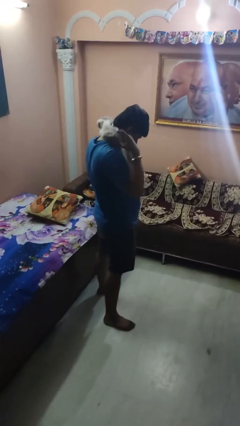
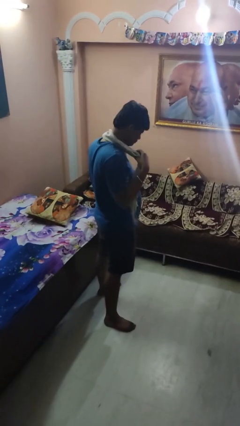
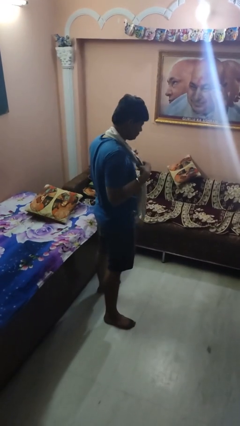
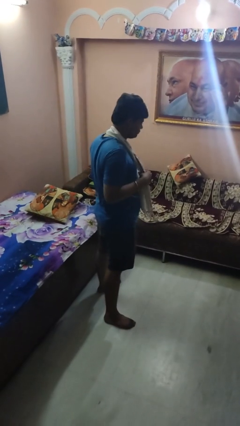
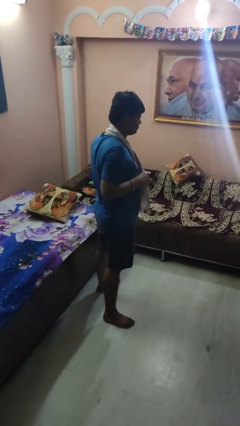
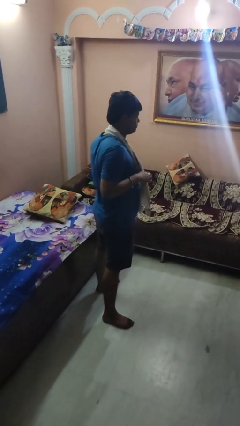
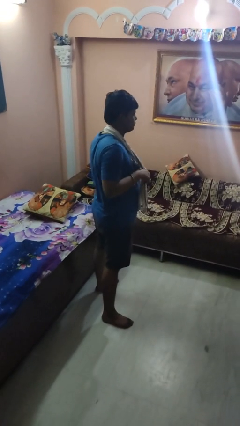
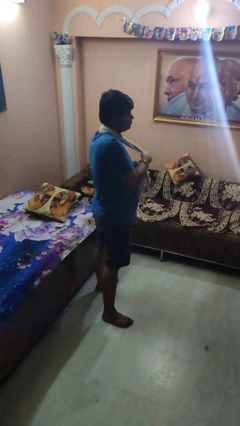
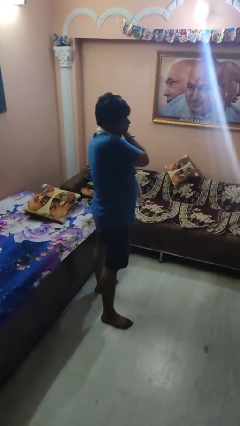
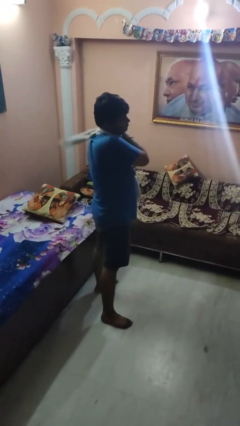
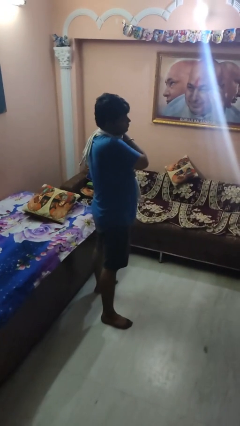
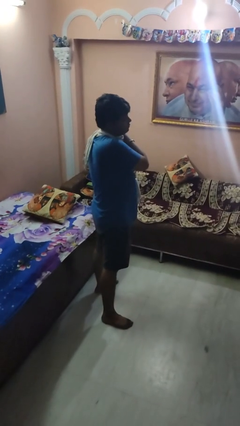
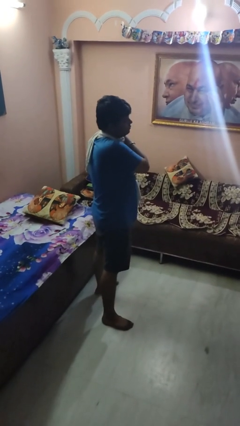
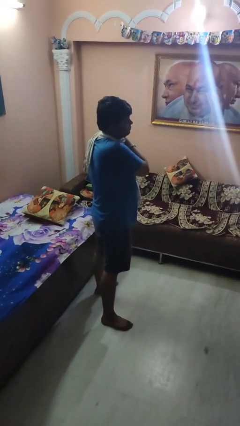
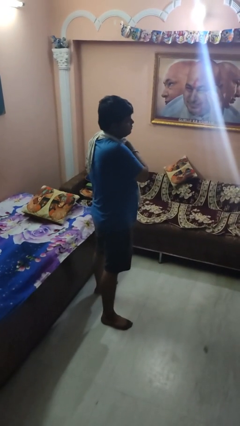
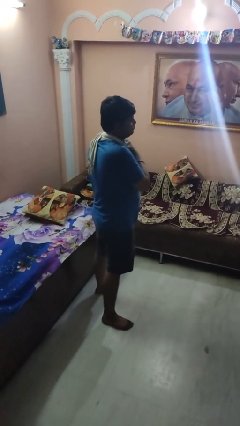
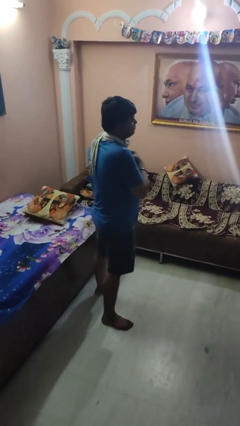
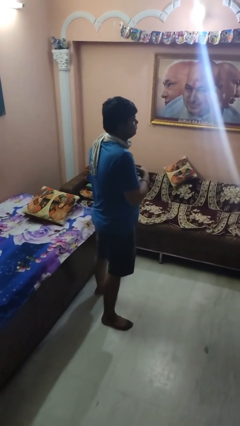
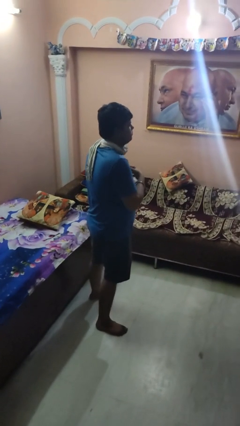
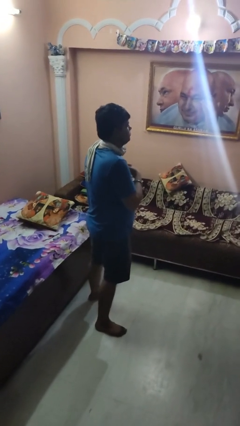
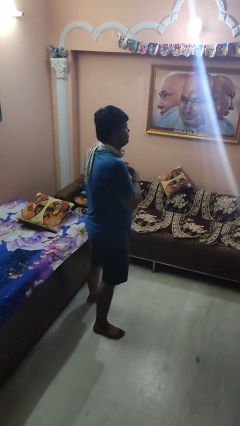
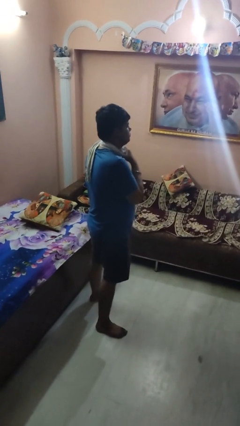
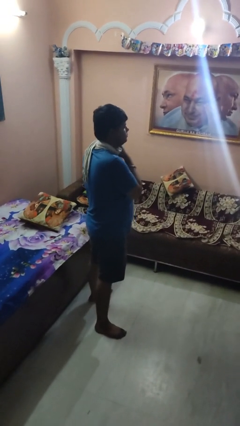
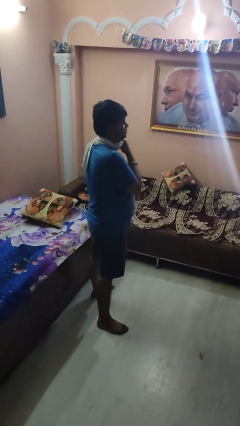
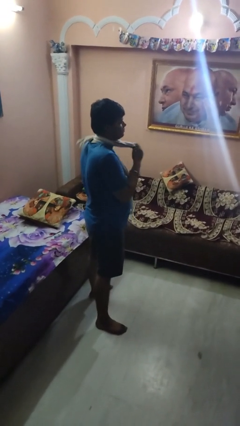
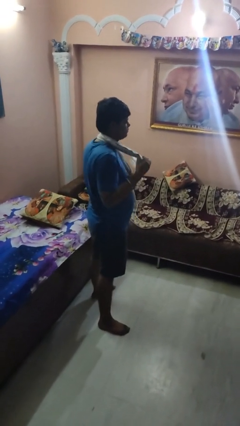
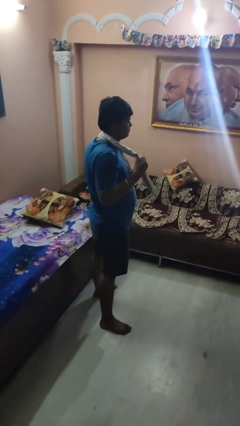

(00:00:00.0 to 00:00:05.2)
person puts on scarf

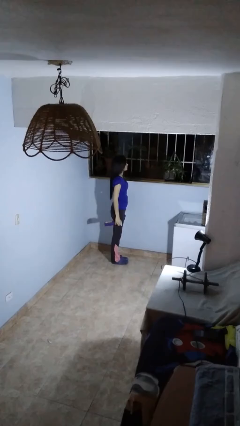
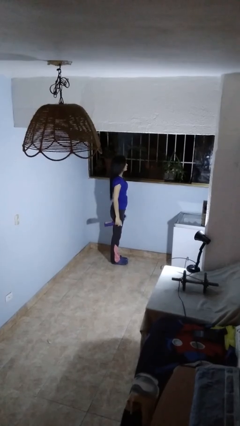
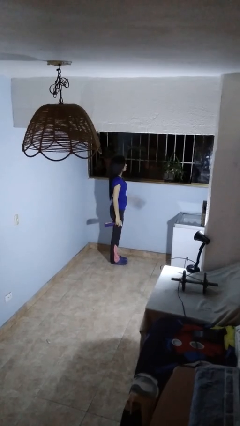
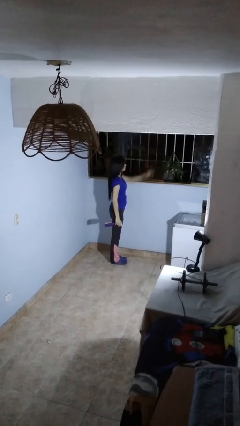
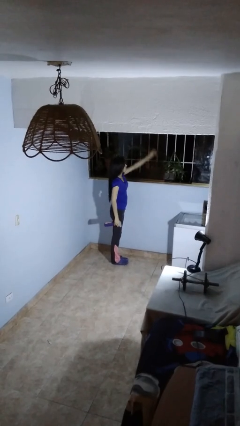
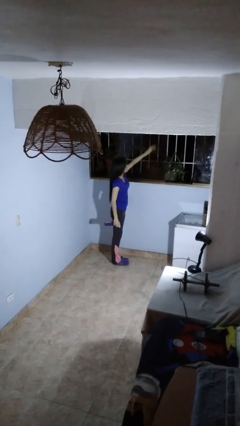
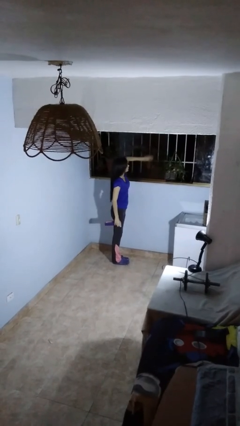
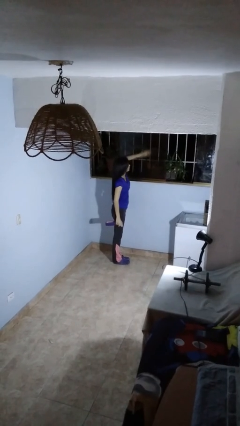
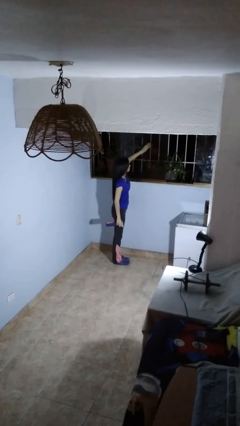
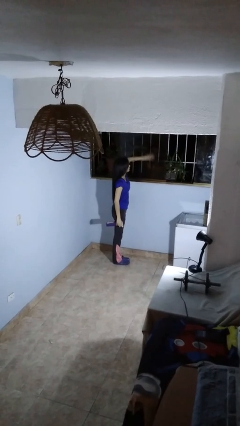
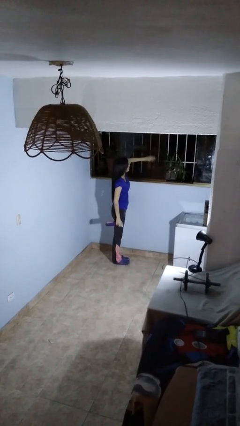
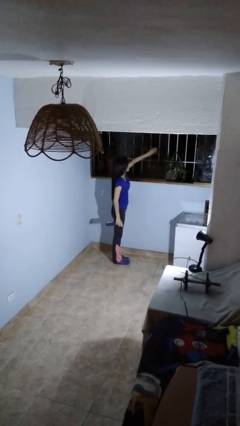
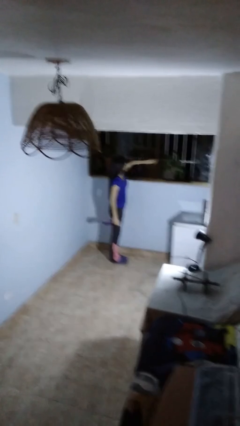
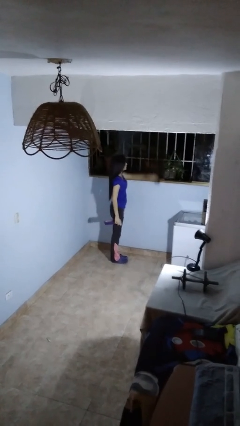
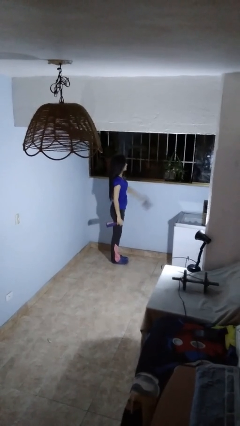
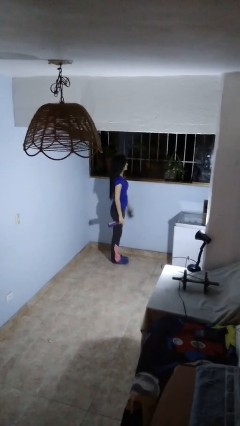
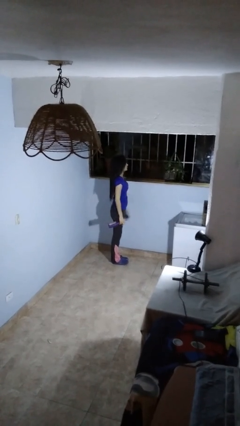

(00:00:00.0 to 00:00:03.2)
person washes window

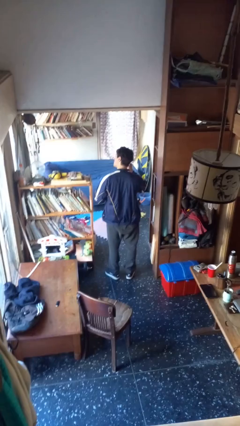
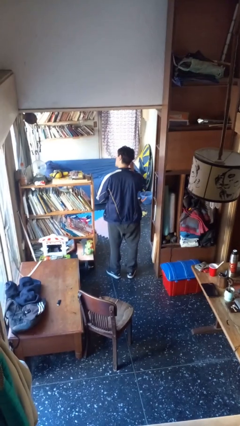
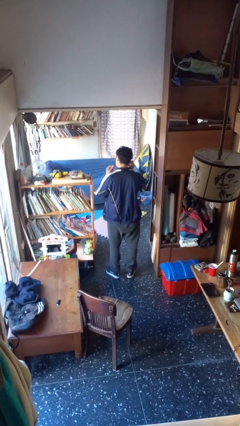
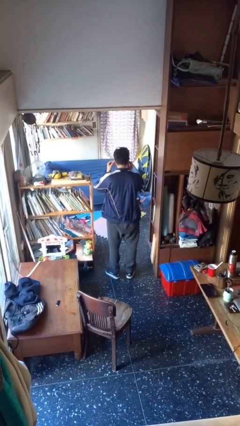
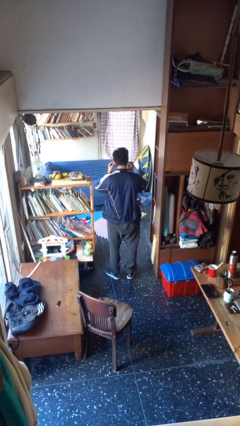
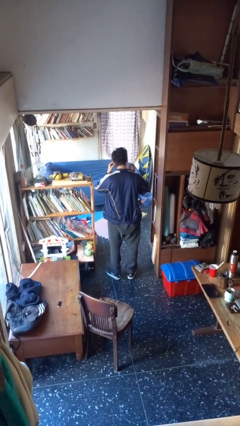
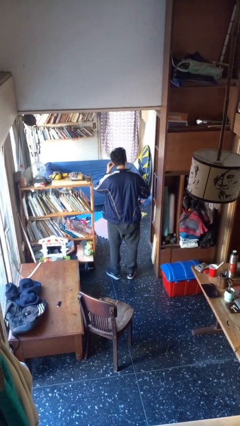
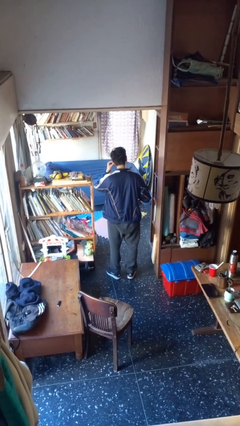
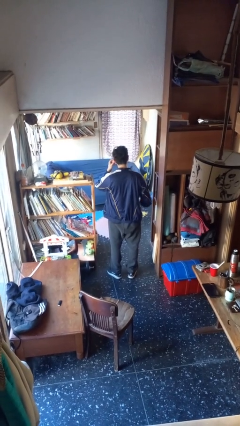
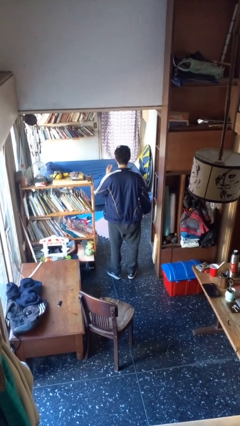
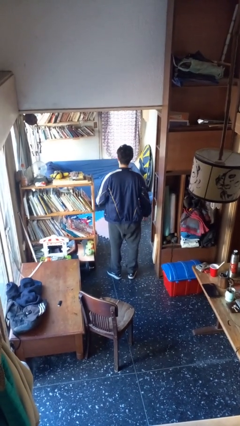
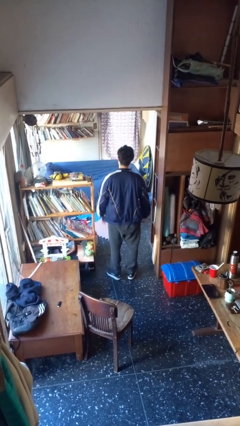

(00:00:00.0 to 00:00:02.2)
person puts on headphones

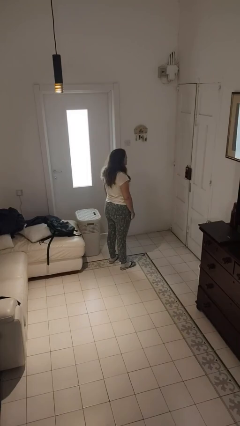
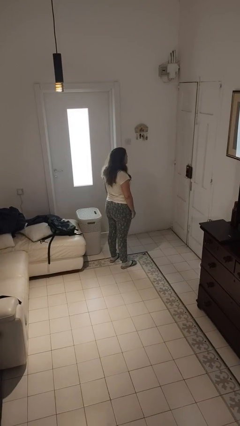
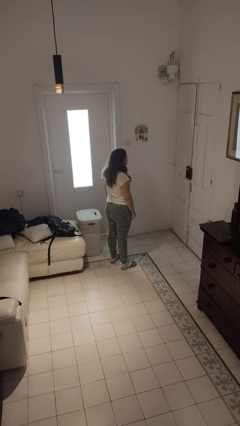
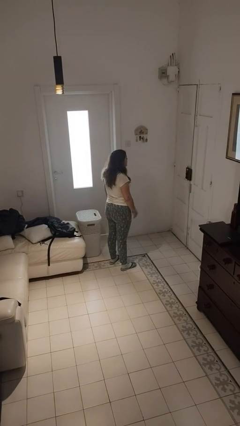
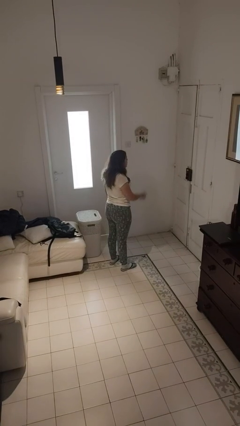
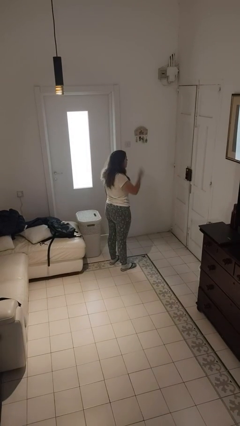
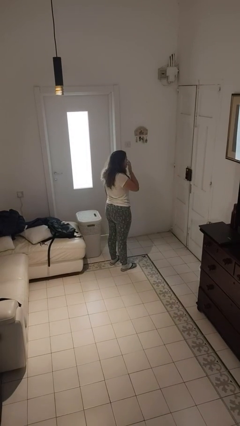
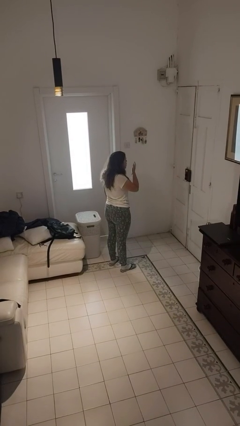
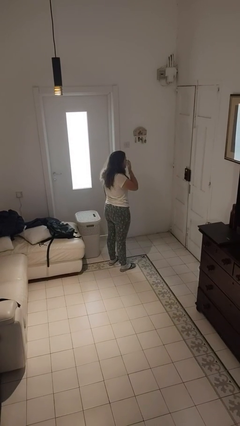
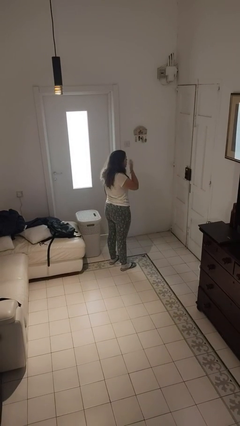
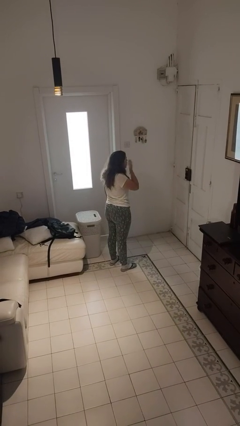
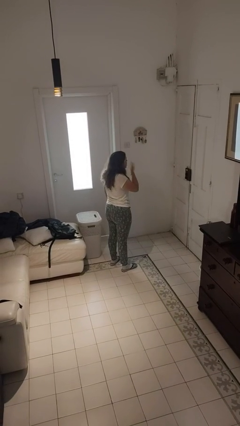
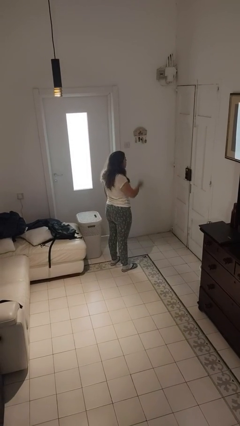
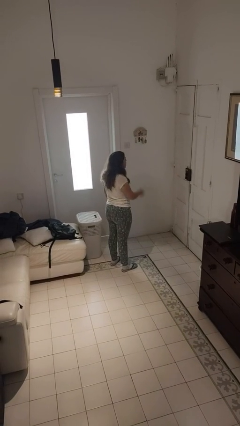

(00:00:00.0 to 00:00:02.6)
person yawns

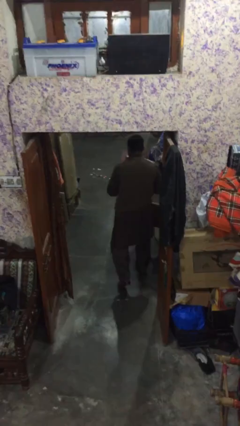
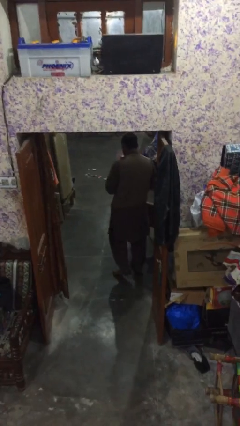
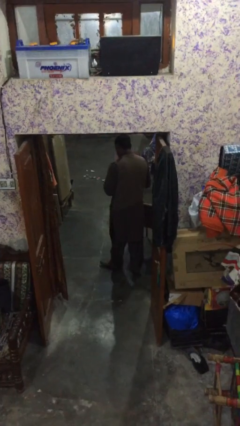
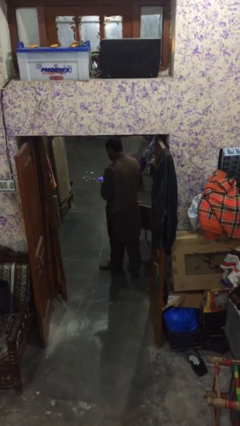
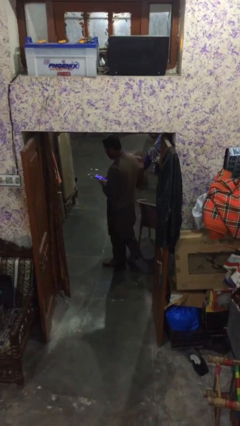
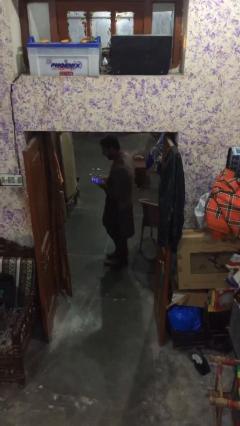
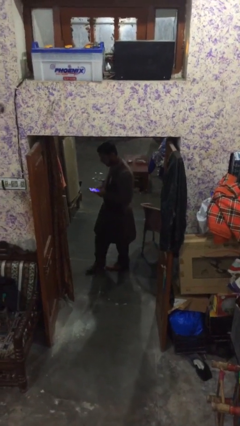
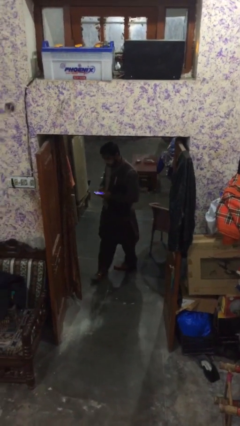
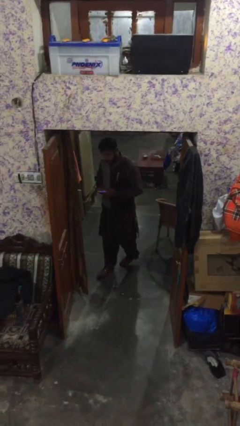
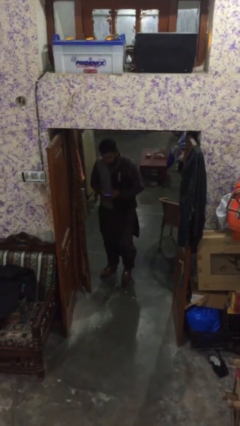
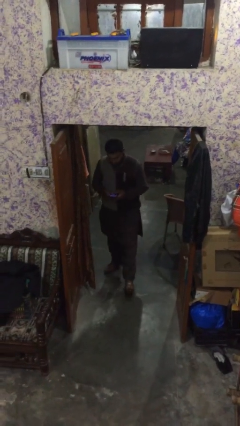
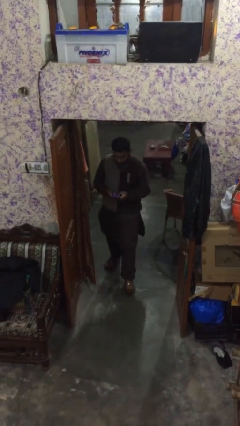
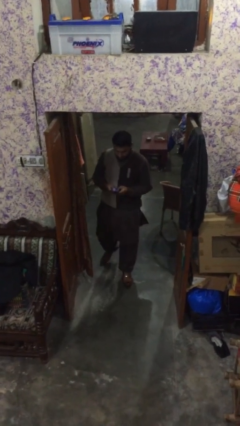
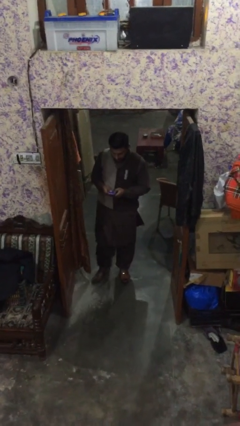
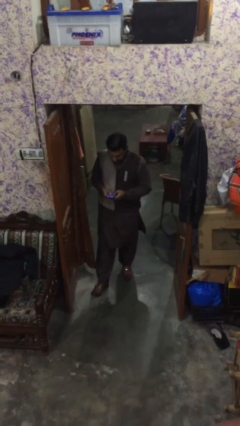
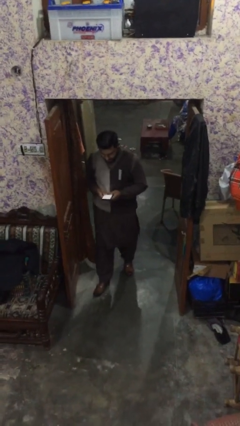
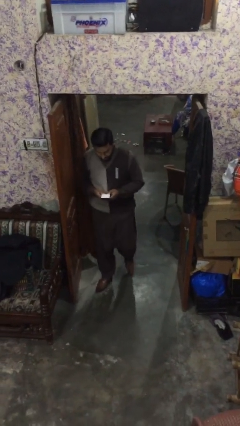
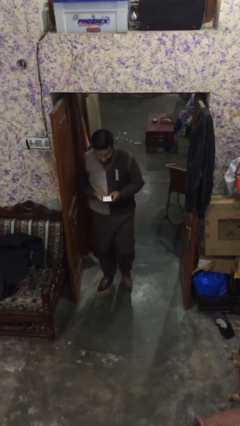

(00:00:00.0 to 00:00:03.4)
person enters scene through structure

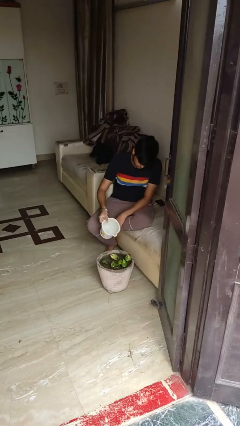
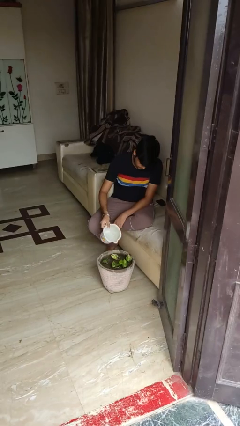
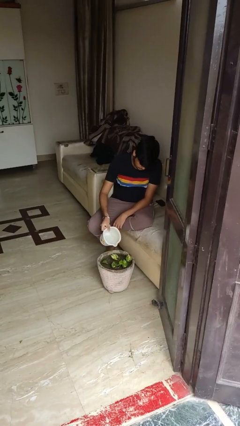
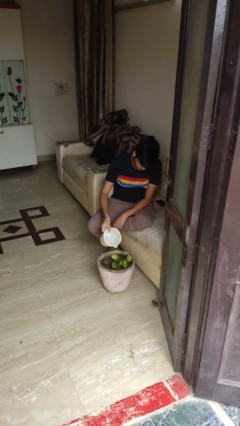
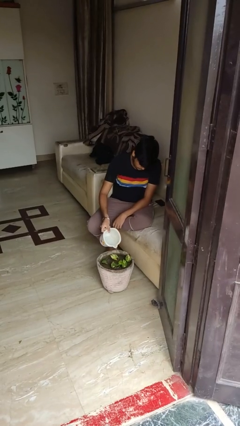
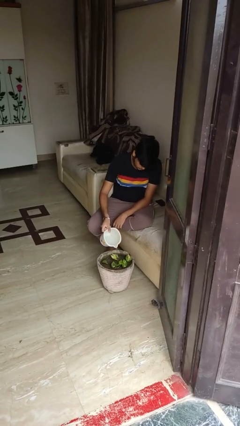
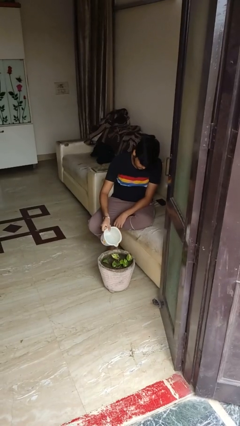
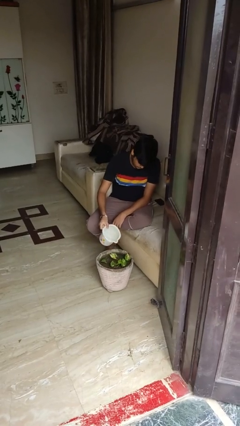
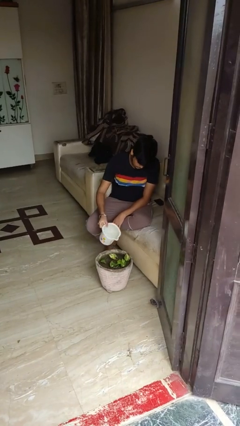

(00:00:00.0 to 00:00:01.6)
person waters houseplant
